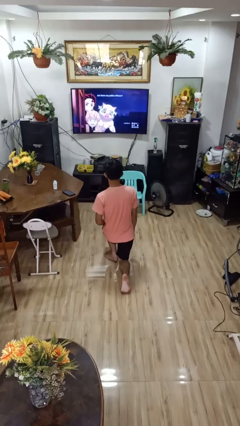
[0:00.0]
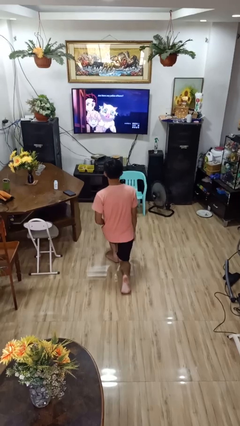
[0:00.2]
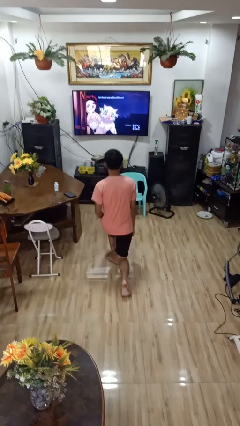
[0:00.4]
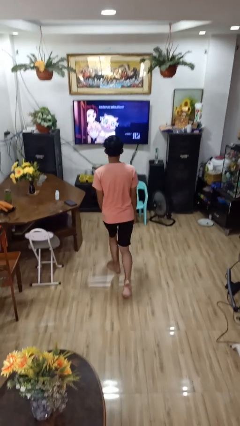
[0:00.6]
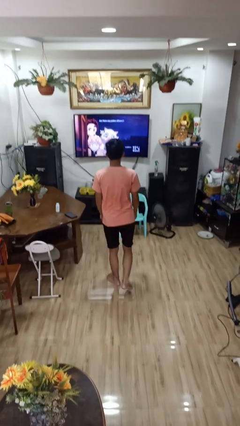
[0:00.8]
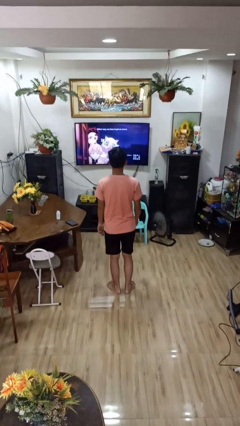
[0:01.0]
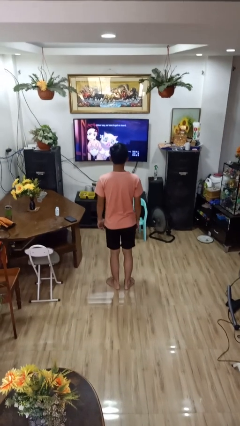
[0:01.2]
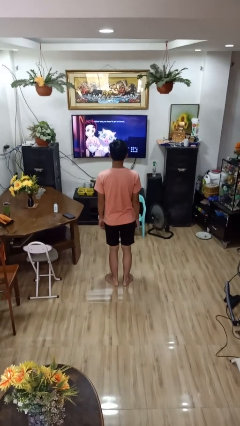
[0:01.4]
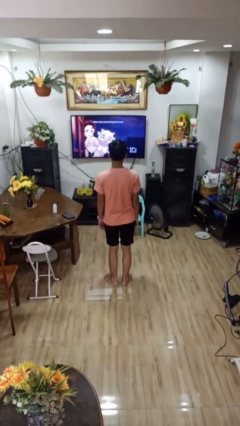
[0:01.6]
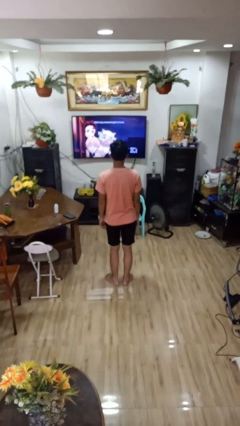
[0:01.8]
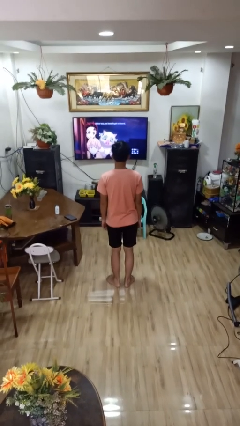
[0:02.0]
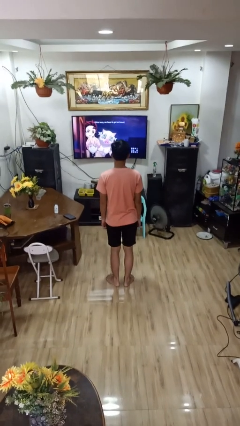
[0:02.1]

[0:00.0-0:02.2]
person stands up from floor

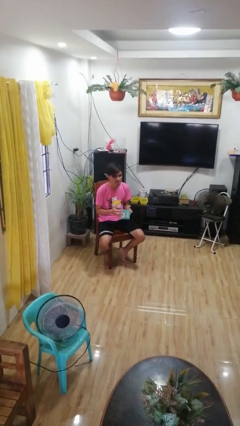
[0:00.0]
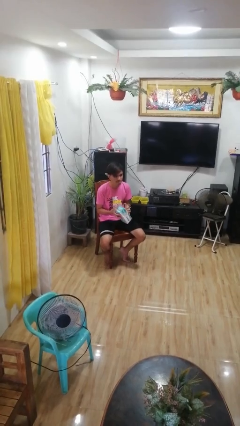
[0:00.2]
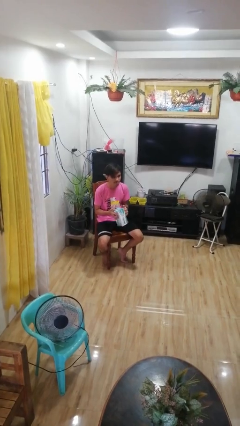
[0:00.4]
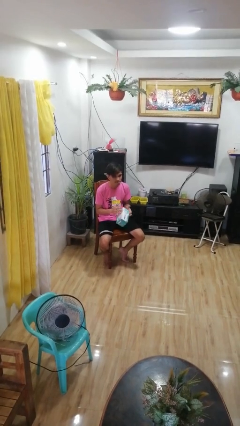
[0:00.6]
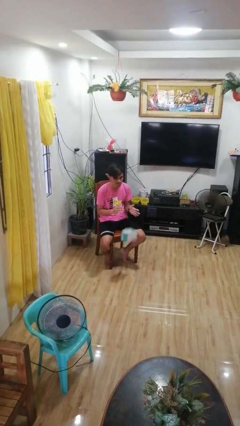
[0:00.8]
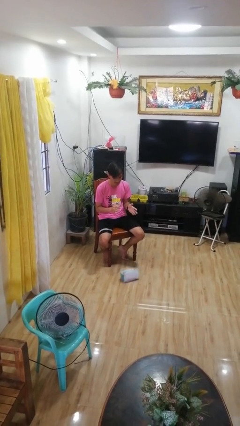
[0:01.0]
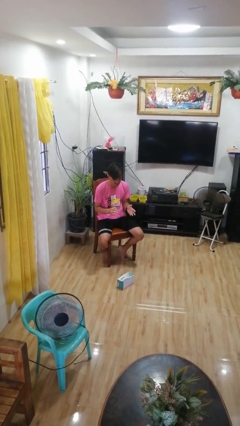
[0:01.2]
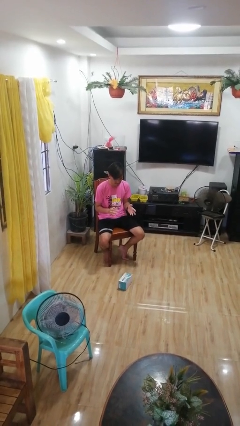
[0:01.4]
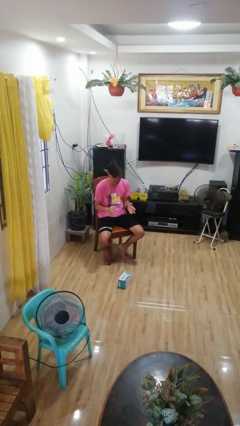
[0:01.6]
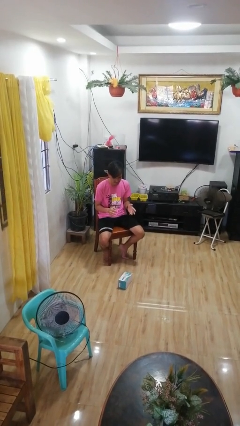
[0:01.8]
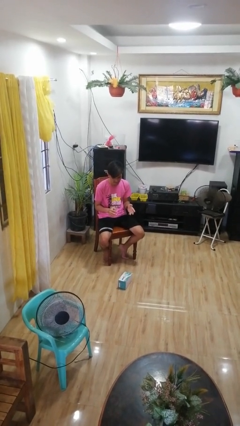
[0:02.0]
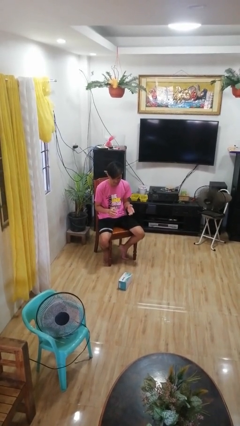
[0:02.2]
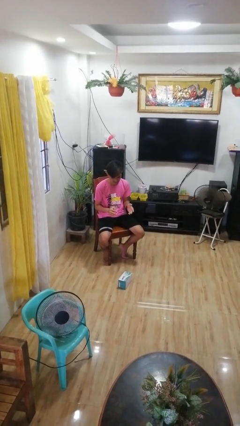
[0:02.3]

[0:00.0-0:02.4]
person drops object

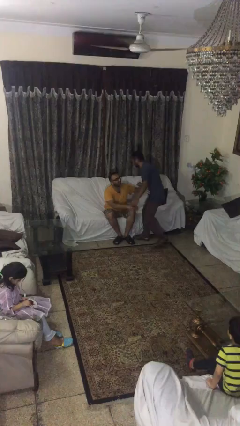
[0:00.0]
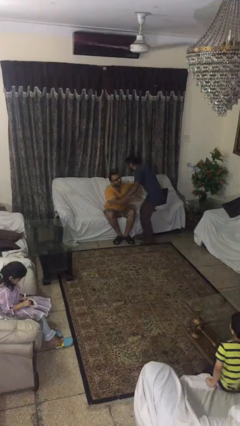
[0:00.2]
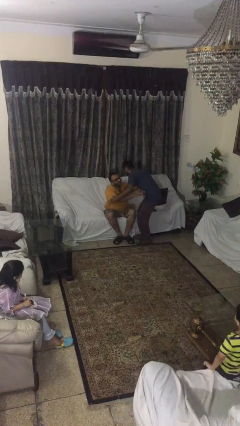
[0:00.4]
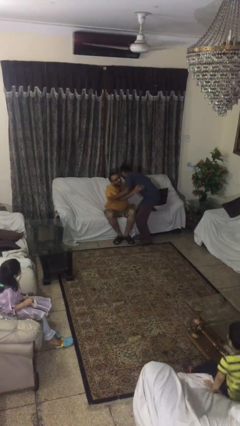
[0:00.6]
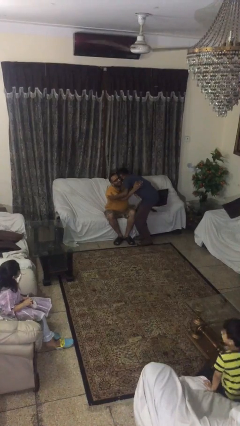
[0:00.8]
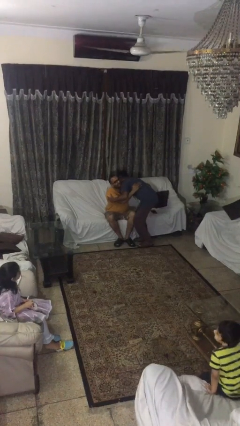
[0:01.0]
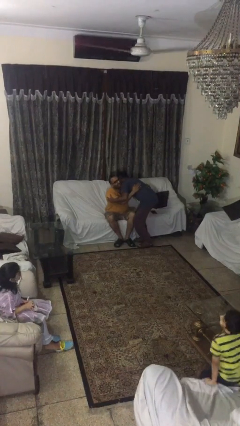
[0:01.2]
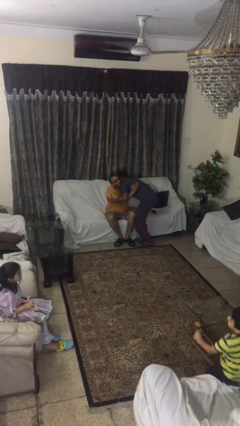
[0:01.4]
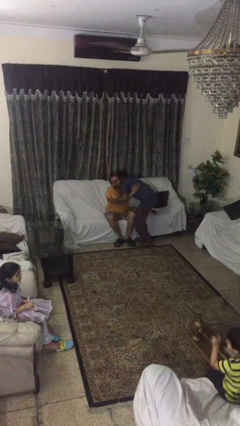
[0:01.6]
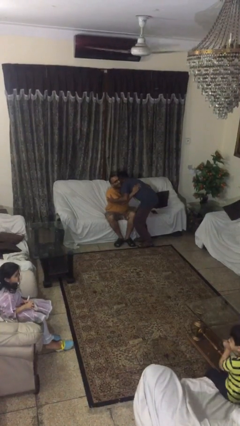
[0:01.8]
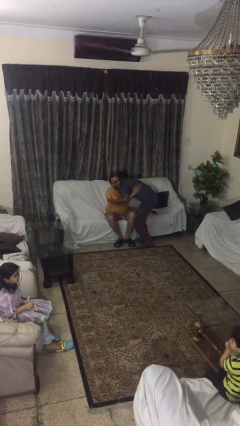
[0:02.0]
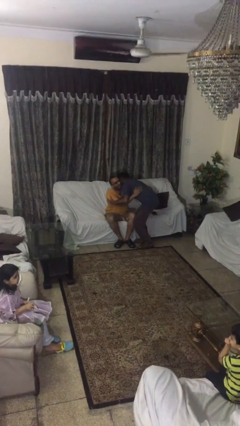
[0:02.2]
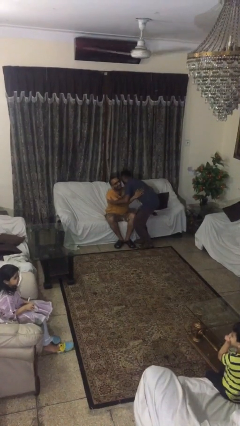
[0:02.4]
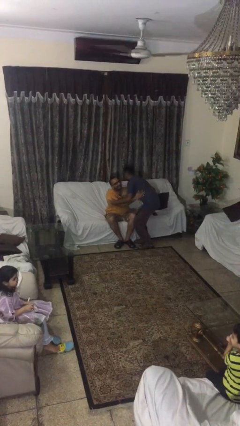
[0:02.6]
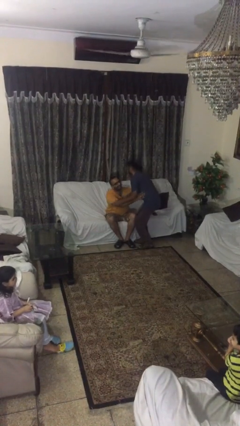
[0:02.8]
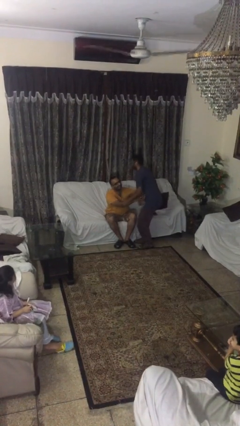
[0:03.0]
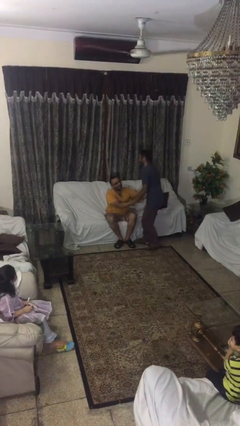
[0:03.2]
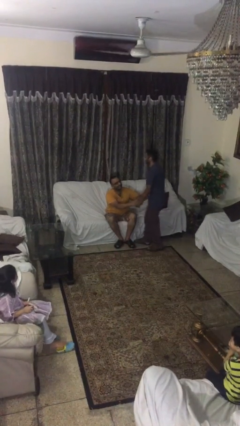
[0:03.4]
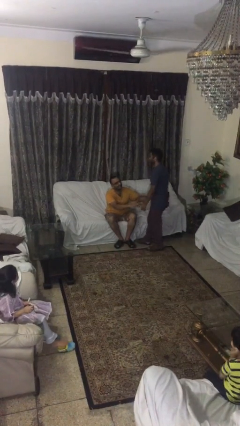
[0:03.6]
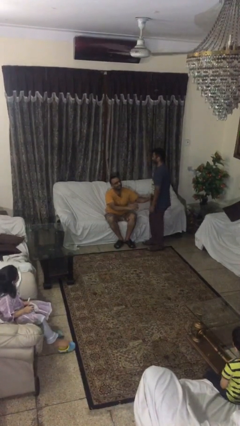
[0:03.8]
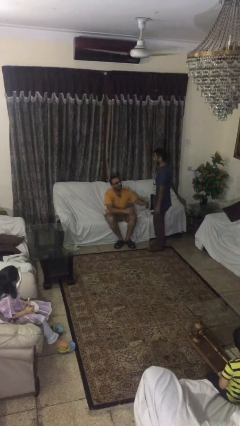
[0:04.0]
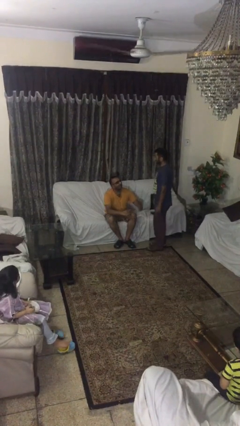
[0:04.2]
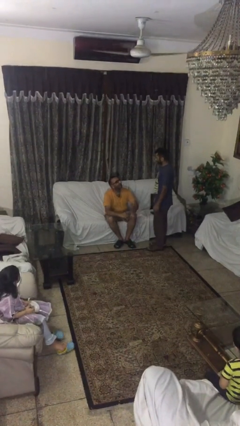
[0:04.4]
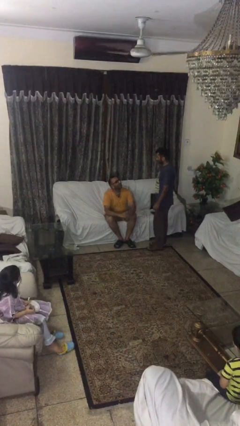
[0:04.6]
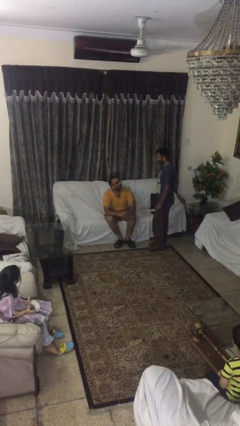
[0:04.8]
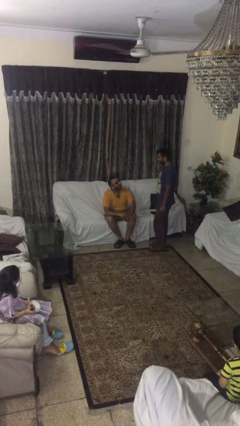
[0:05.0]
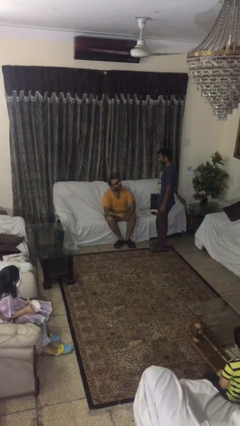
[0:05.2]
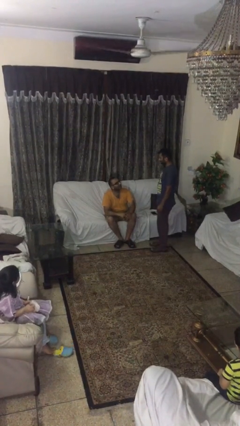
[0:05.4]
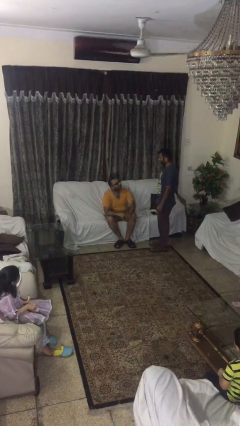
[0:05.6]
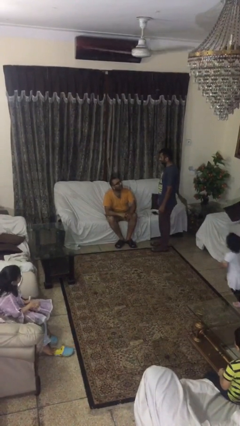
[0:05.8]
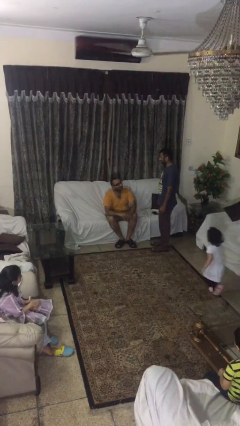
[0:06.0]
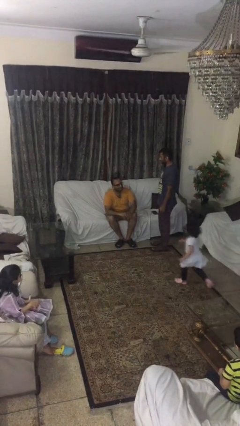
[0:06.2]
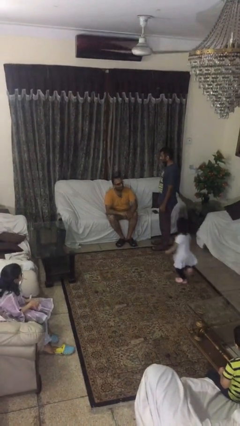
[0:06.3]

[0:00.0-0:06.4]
person embraces person

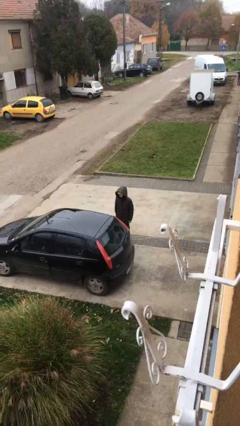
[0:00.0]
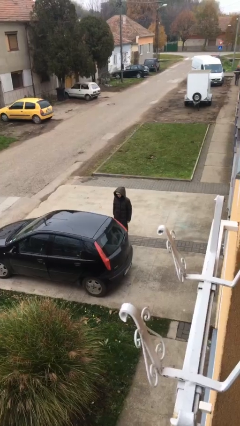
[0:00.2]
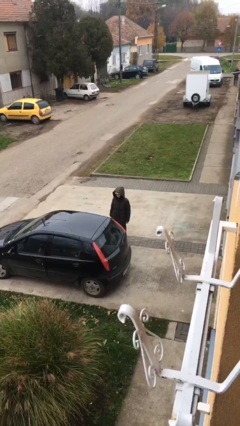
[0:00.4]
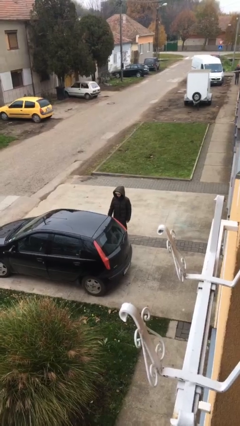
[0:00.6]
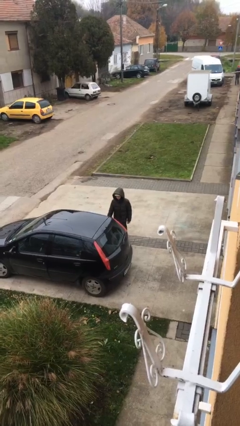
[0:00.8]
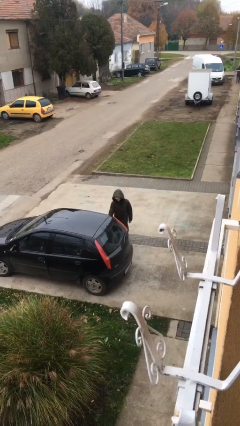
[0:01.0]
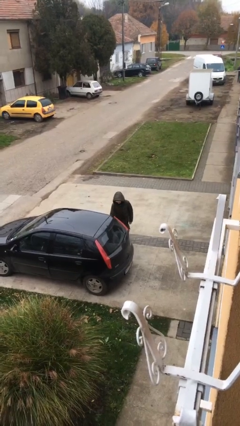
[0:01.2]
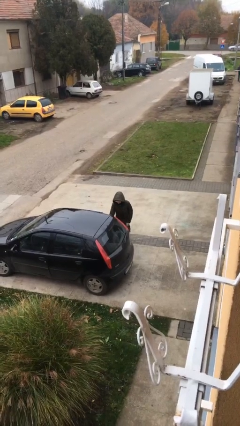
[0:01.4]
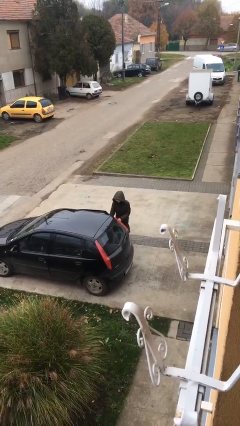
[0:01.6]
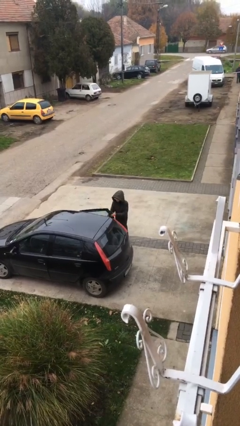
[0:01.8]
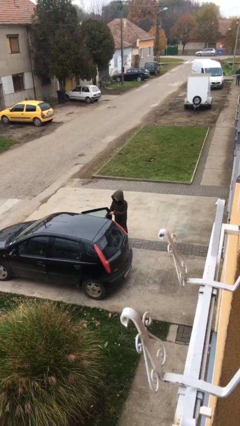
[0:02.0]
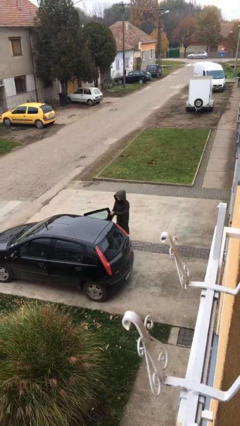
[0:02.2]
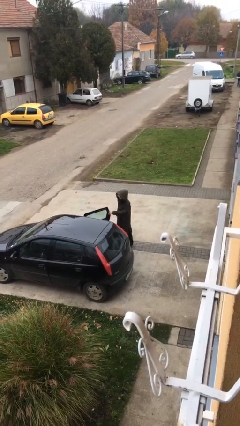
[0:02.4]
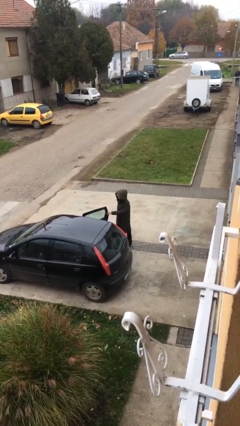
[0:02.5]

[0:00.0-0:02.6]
person opens car door

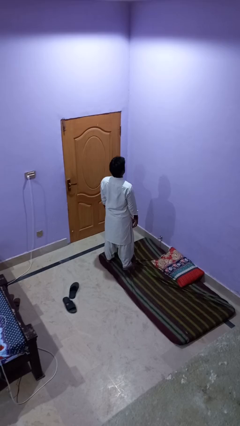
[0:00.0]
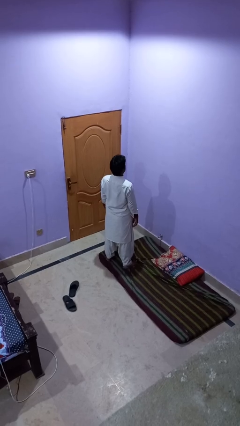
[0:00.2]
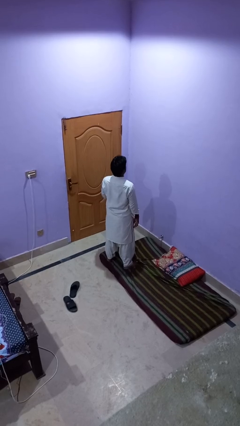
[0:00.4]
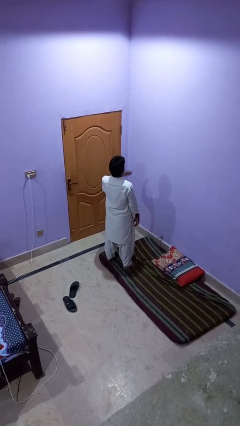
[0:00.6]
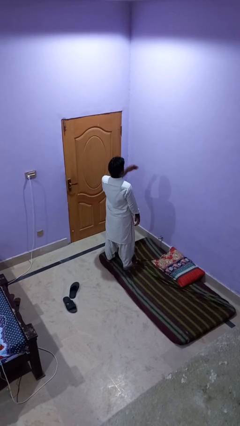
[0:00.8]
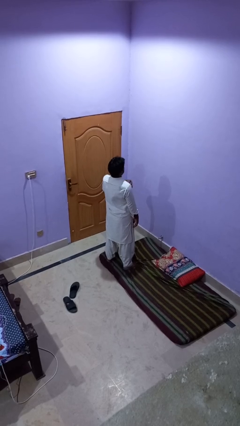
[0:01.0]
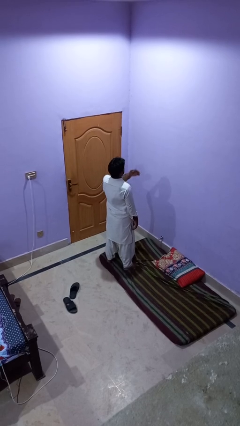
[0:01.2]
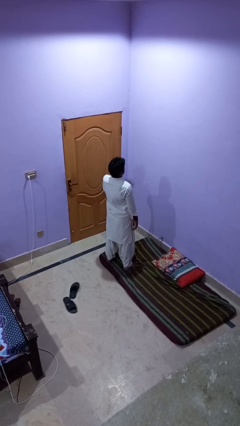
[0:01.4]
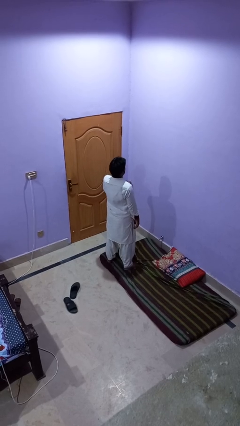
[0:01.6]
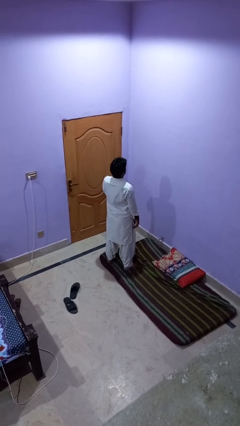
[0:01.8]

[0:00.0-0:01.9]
person drums on chest

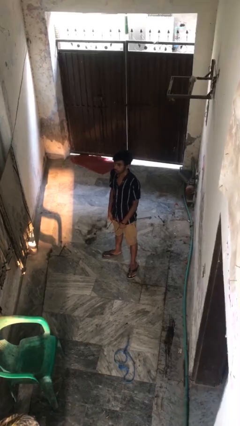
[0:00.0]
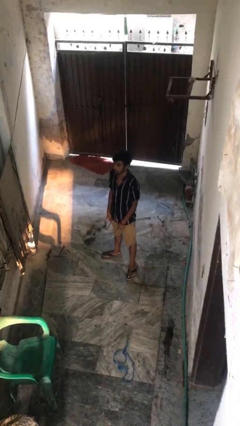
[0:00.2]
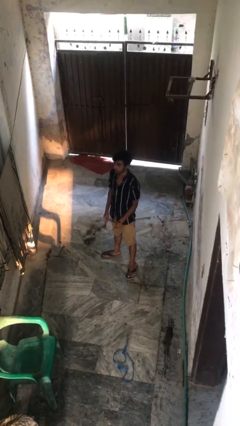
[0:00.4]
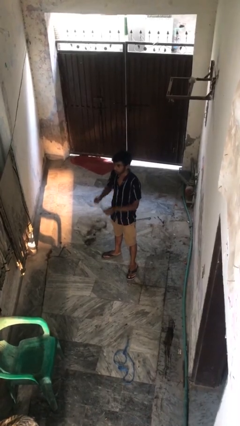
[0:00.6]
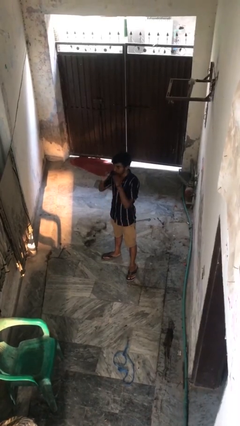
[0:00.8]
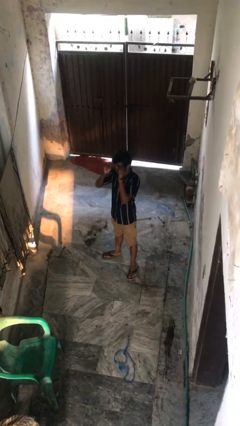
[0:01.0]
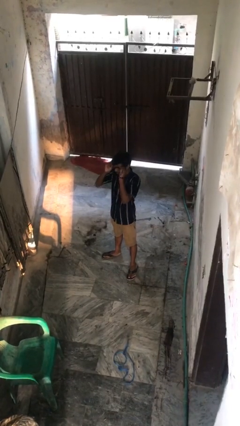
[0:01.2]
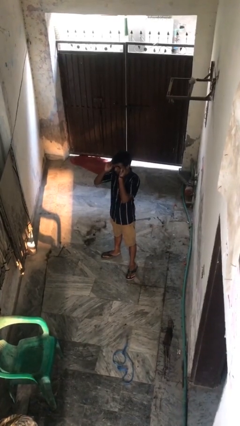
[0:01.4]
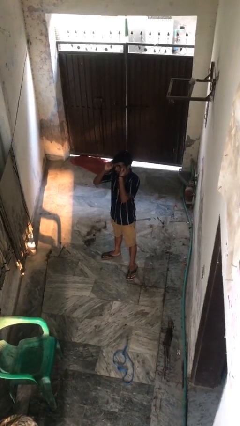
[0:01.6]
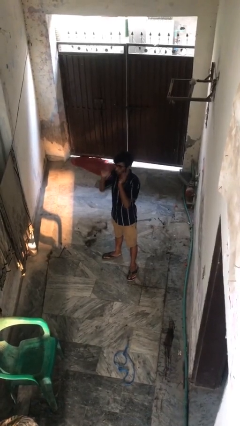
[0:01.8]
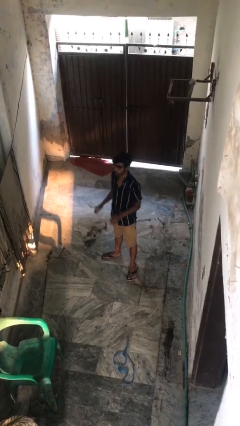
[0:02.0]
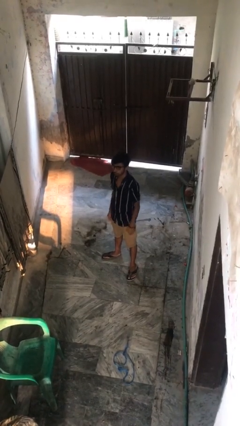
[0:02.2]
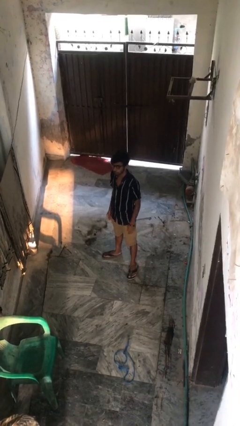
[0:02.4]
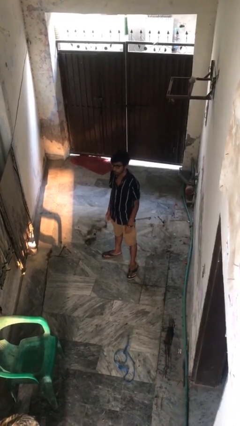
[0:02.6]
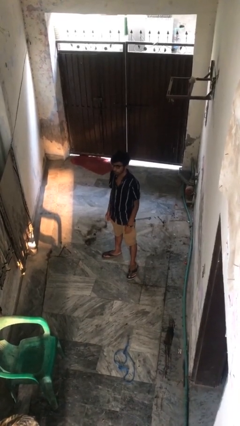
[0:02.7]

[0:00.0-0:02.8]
person puts on glasses
